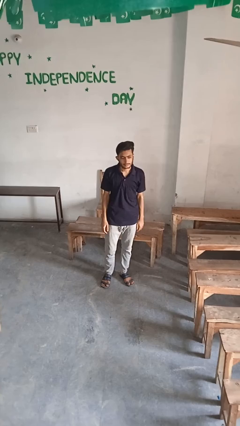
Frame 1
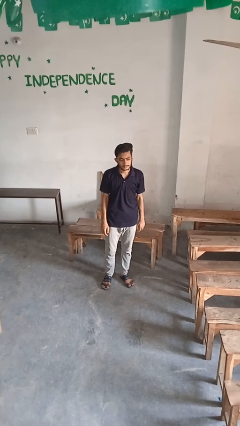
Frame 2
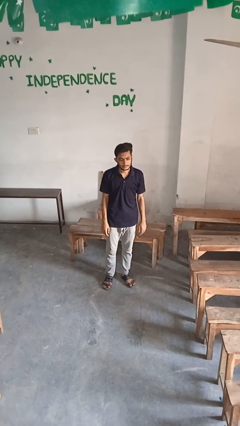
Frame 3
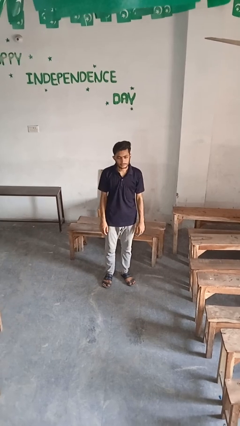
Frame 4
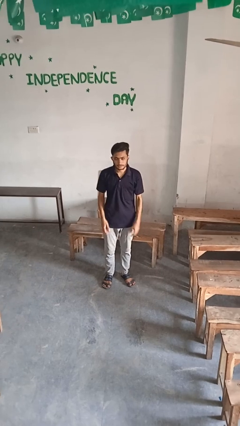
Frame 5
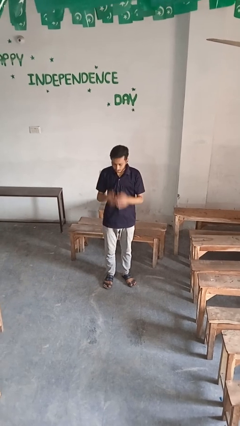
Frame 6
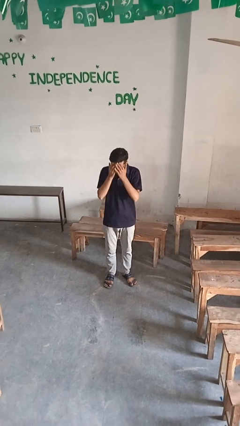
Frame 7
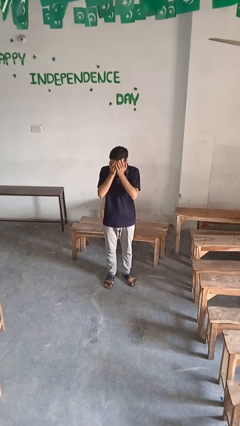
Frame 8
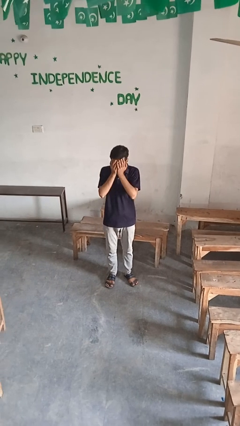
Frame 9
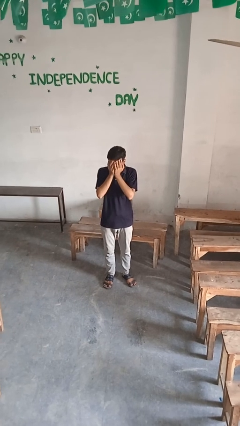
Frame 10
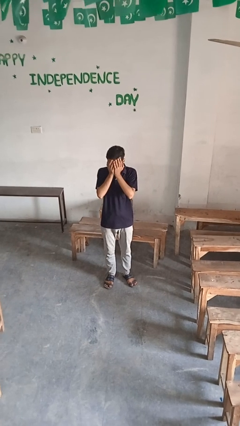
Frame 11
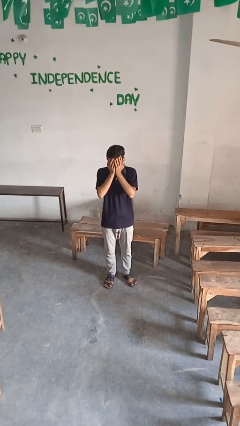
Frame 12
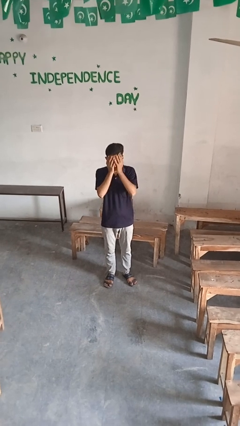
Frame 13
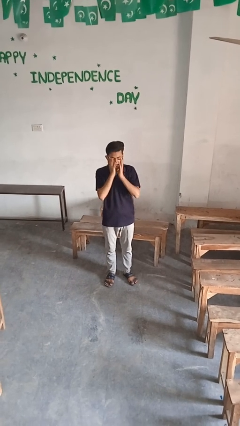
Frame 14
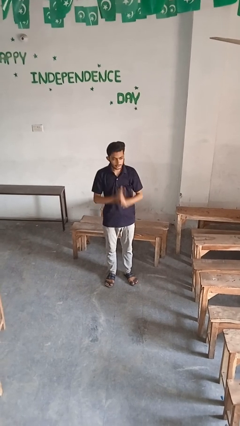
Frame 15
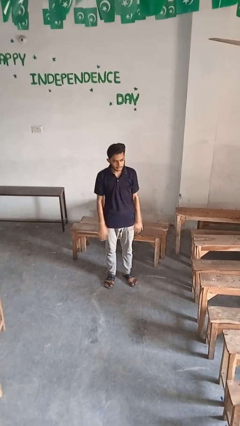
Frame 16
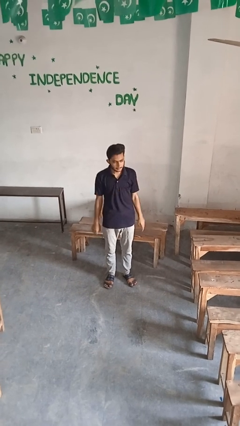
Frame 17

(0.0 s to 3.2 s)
person covers face with hands

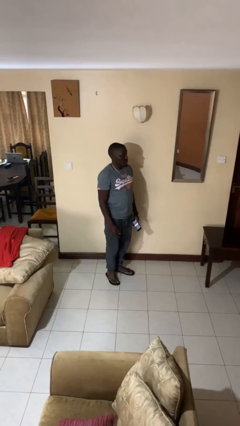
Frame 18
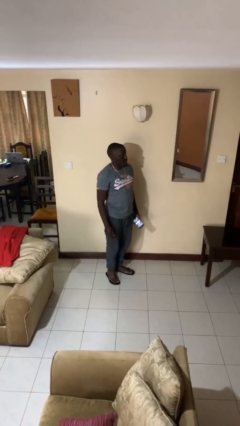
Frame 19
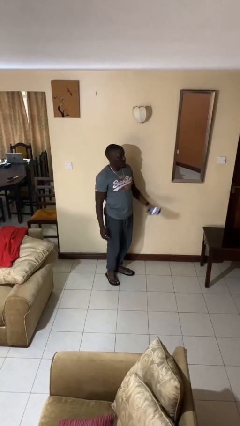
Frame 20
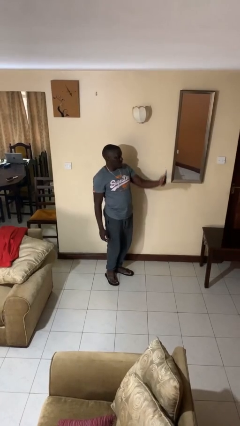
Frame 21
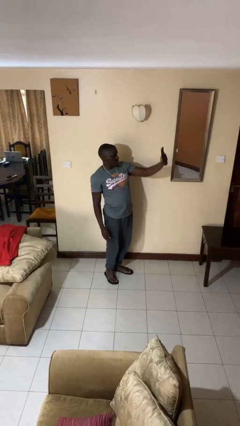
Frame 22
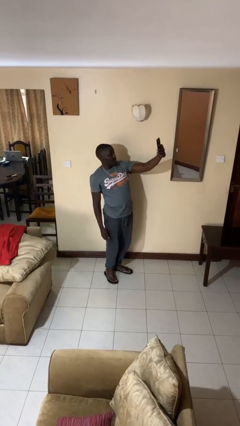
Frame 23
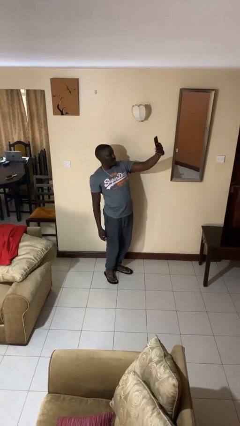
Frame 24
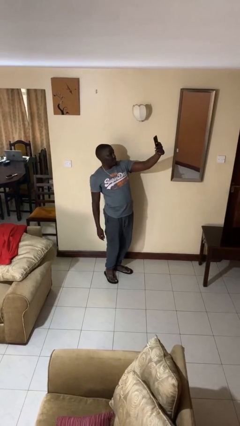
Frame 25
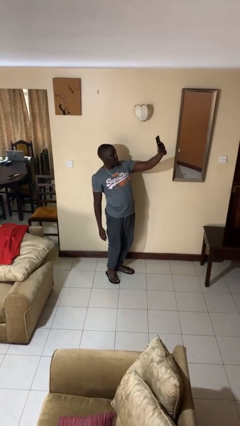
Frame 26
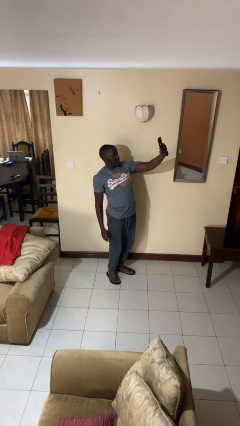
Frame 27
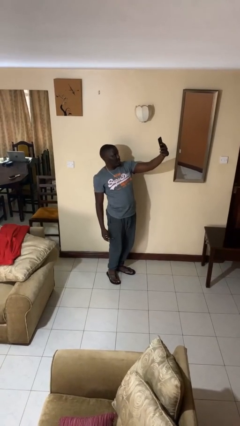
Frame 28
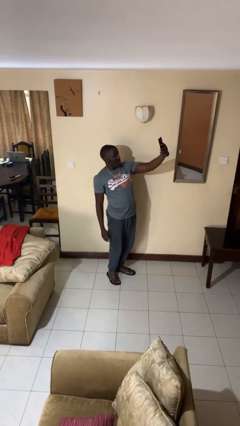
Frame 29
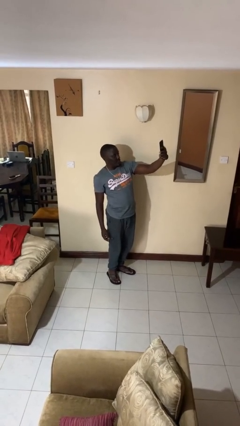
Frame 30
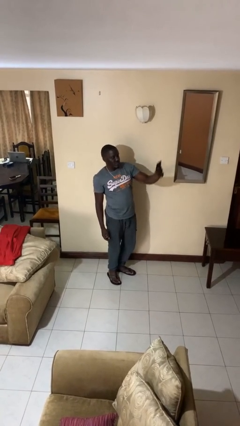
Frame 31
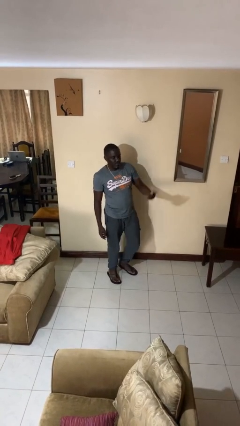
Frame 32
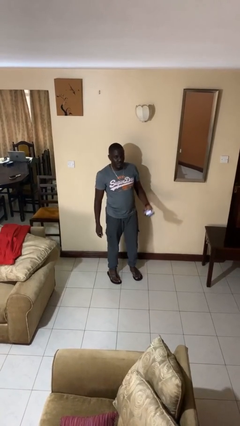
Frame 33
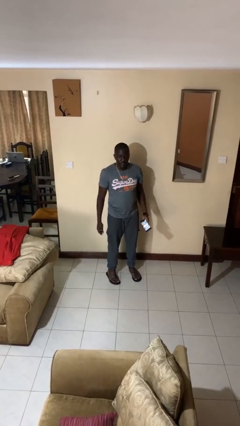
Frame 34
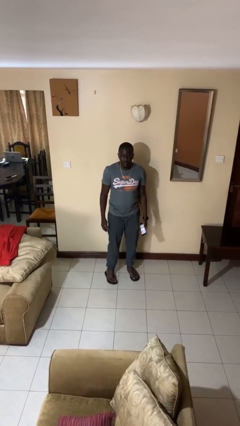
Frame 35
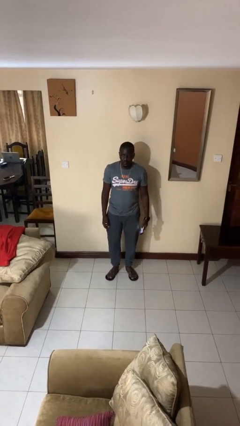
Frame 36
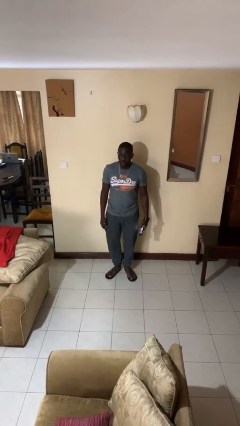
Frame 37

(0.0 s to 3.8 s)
person takes selfie

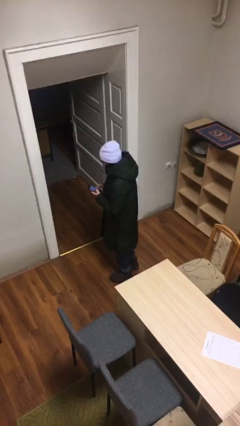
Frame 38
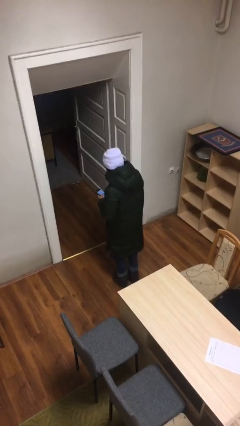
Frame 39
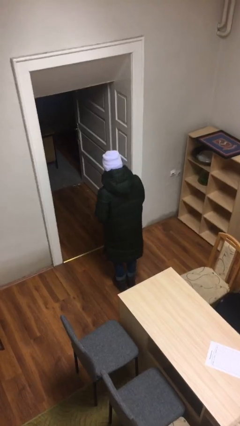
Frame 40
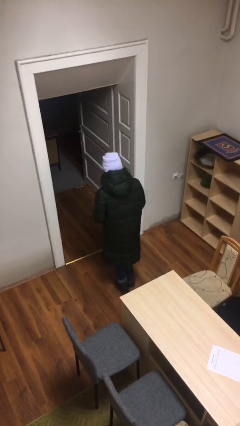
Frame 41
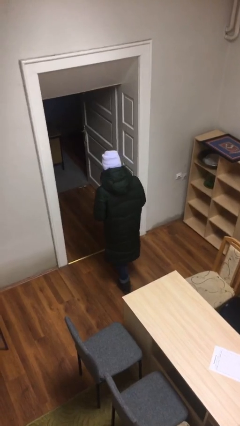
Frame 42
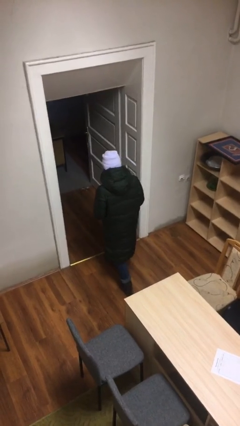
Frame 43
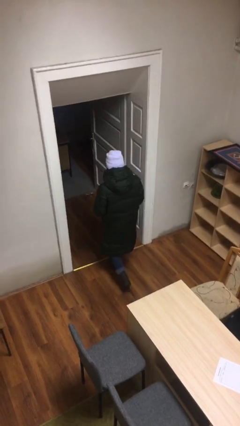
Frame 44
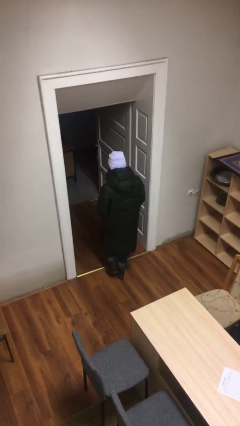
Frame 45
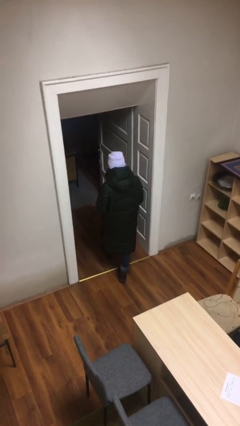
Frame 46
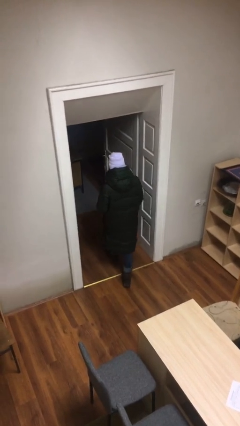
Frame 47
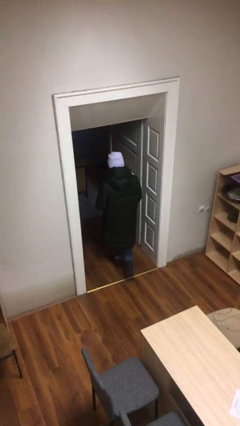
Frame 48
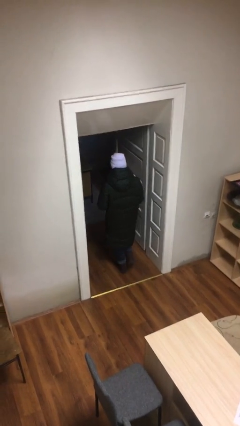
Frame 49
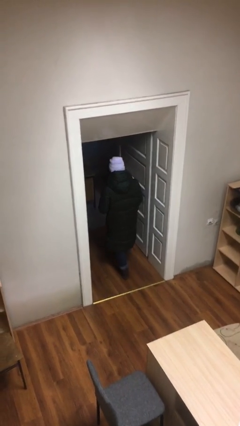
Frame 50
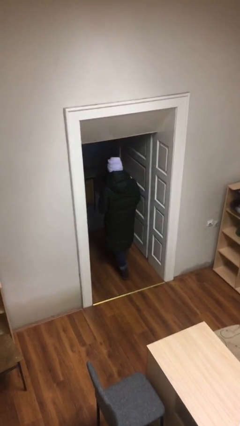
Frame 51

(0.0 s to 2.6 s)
person exits scene through structure

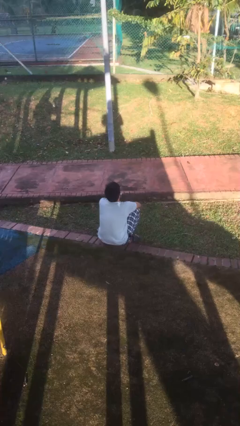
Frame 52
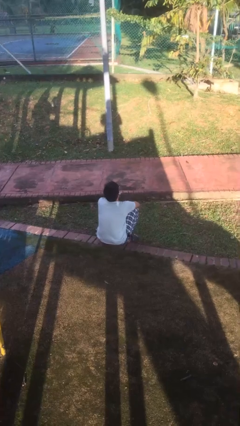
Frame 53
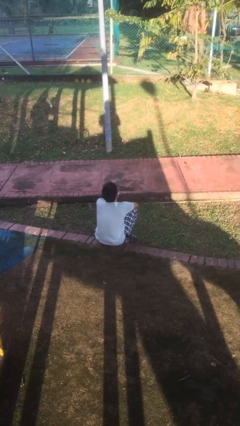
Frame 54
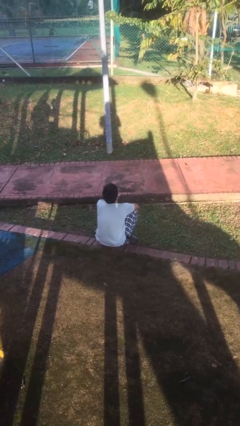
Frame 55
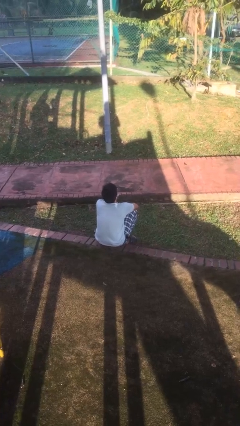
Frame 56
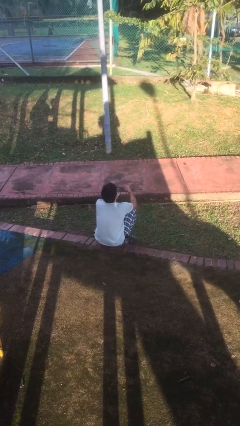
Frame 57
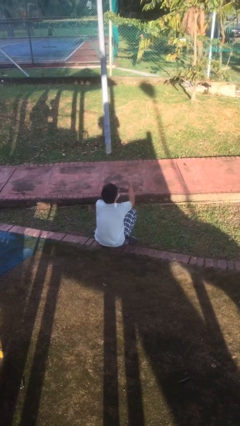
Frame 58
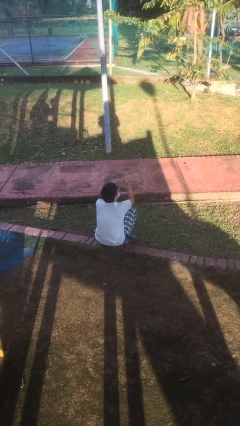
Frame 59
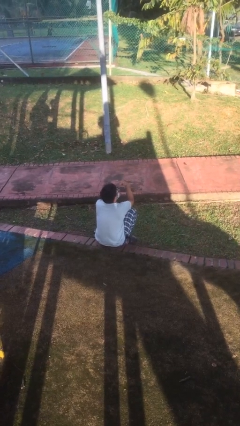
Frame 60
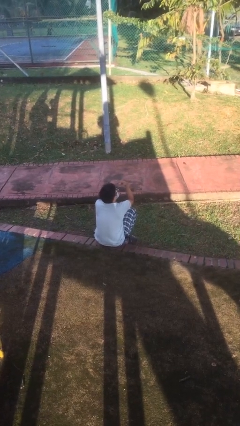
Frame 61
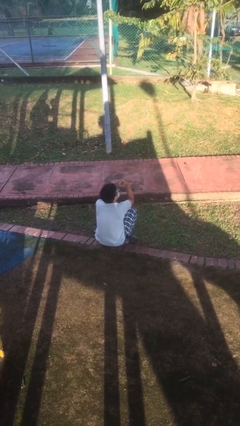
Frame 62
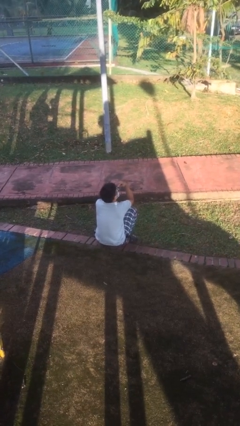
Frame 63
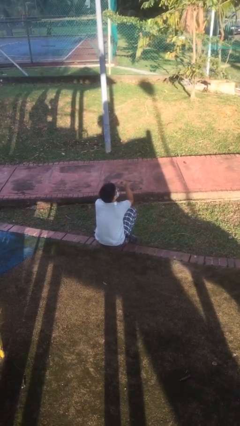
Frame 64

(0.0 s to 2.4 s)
person gestures watch closely

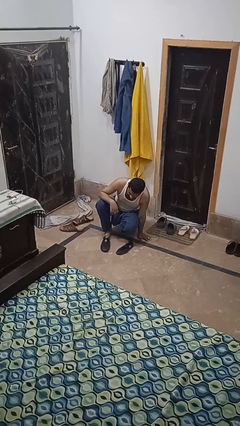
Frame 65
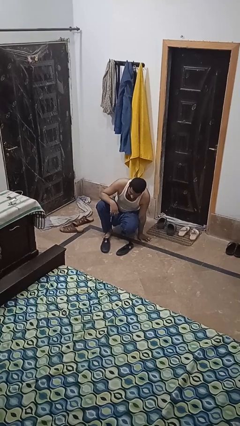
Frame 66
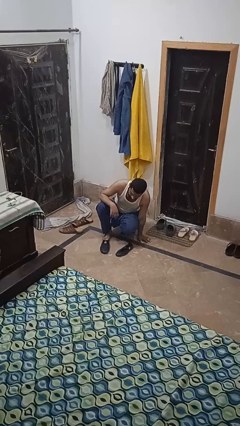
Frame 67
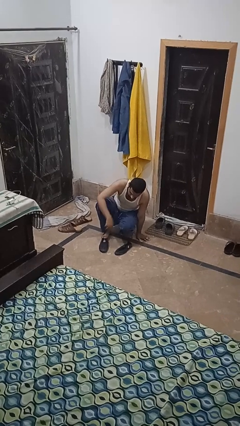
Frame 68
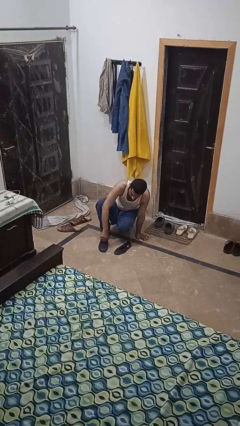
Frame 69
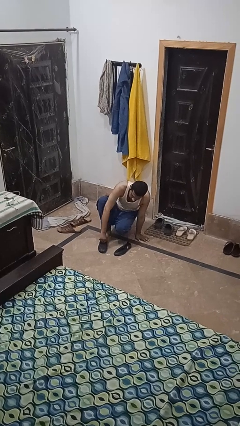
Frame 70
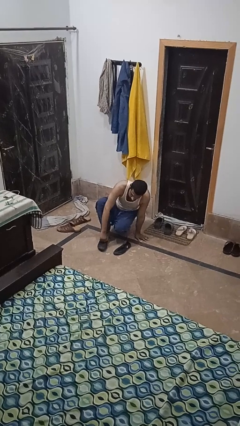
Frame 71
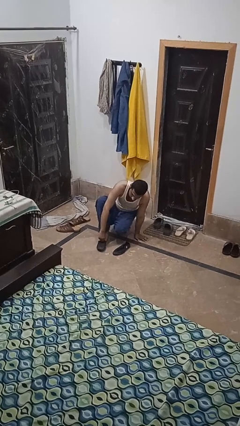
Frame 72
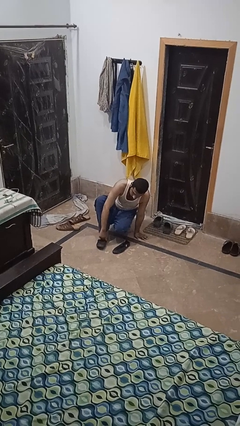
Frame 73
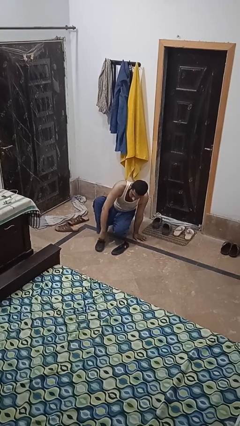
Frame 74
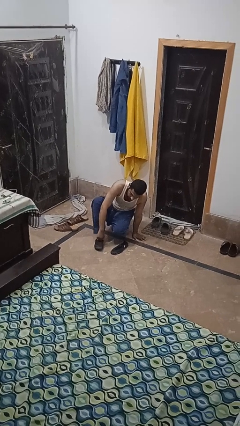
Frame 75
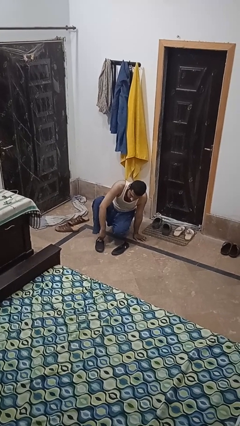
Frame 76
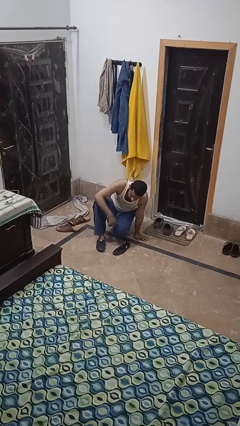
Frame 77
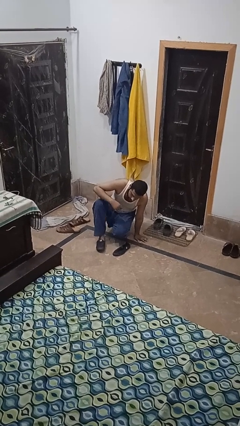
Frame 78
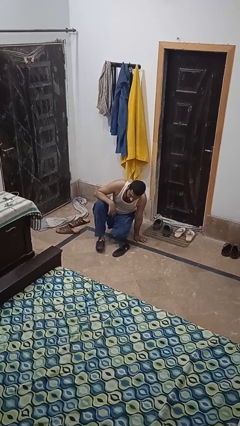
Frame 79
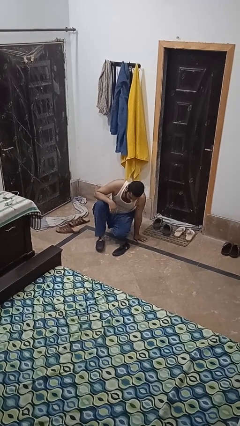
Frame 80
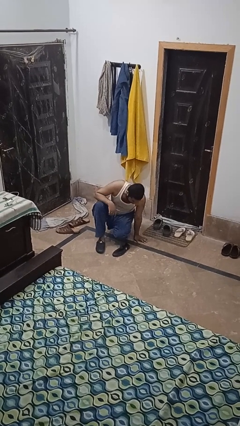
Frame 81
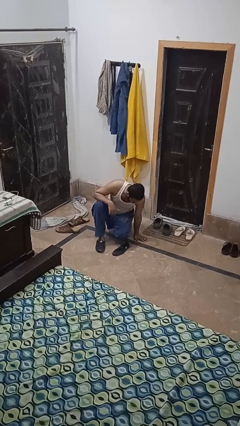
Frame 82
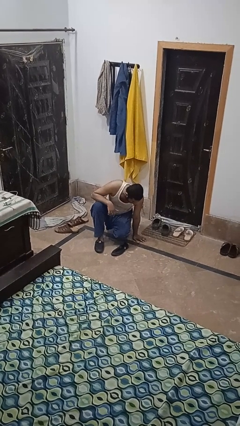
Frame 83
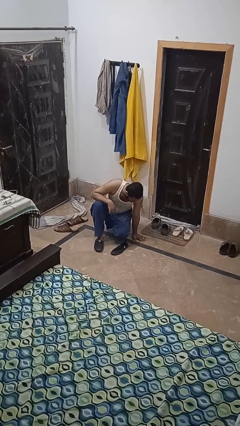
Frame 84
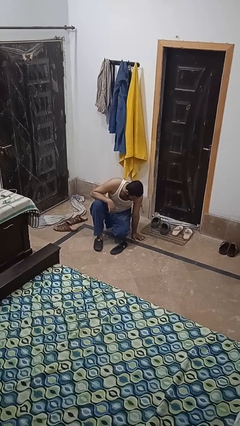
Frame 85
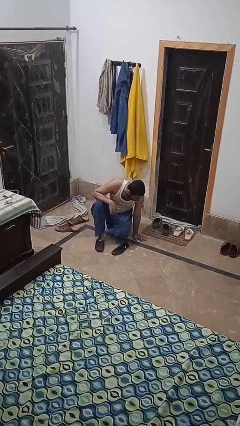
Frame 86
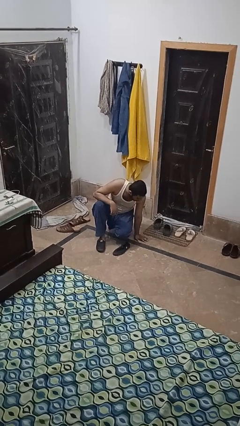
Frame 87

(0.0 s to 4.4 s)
person puts on shoes

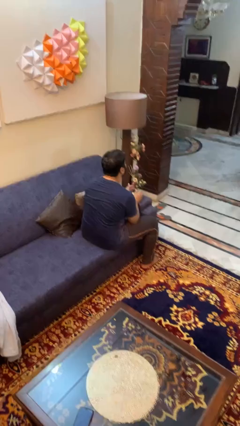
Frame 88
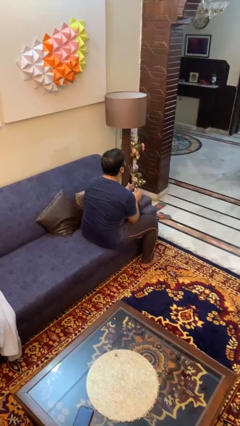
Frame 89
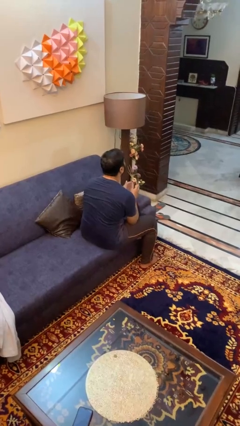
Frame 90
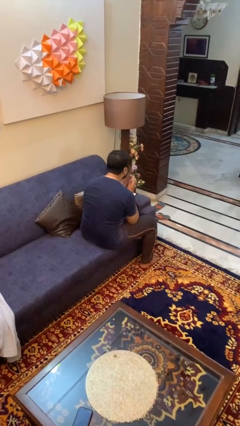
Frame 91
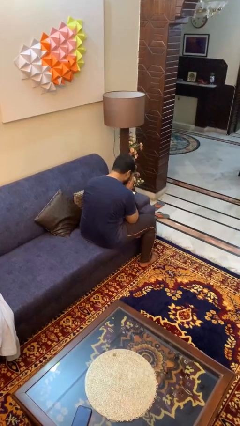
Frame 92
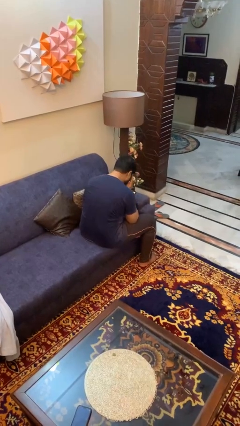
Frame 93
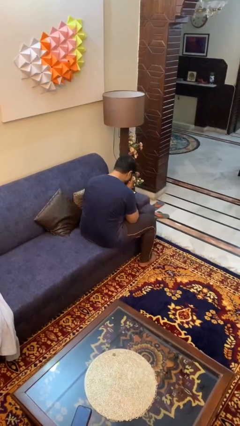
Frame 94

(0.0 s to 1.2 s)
person sneezes into hand
